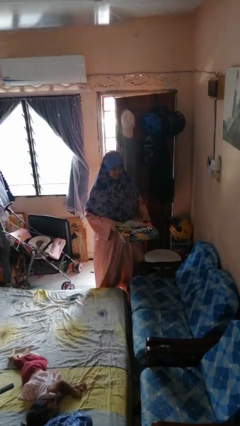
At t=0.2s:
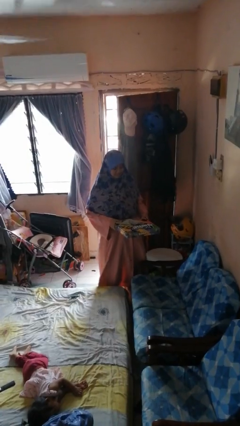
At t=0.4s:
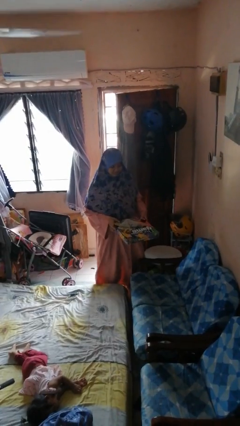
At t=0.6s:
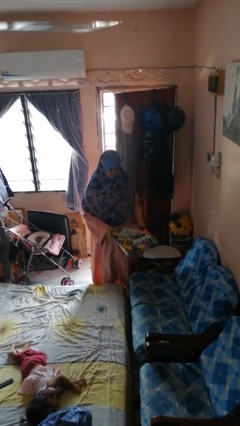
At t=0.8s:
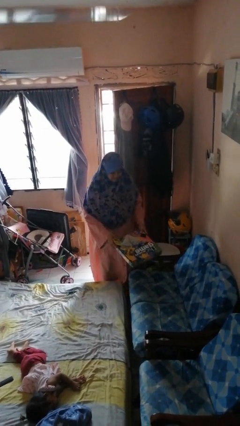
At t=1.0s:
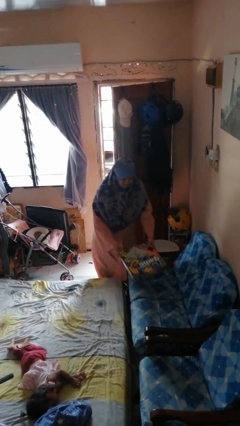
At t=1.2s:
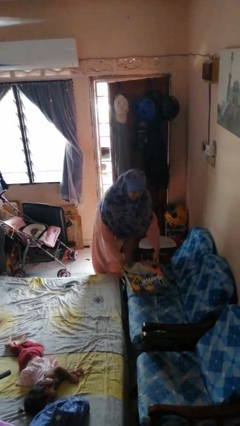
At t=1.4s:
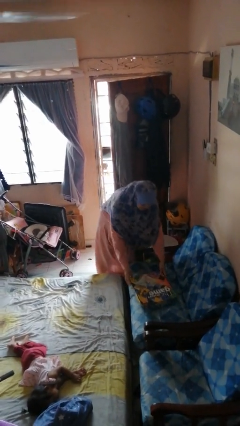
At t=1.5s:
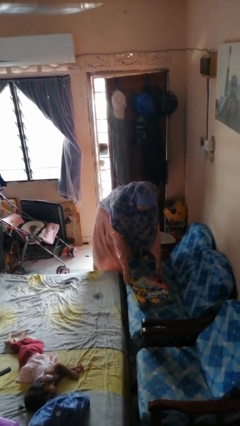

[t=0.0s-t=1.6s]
person puts down object on couch

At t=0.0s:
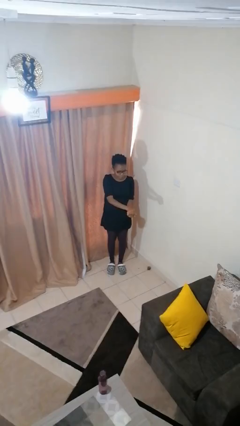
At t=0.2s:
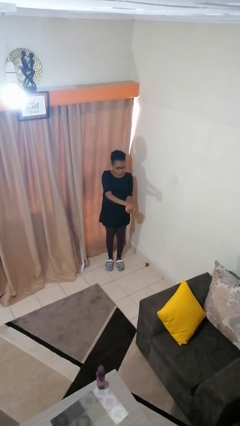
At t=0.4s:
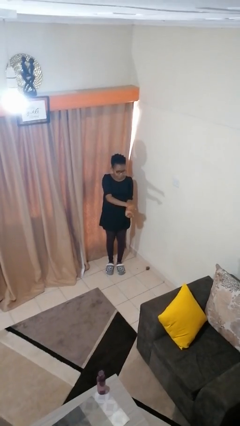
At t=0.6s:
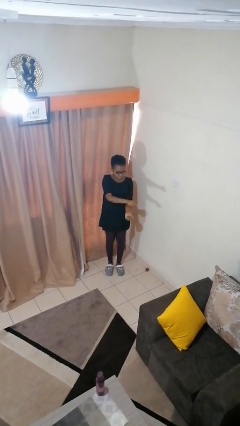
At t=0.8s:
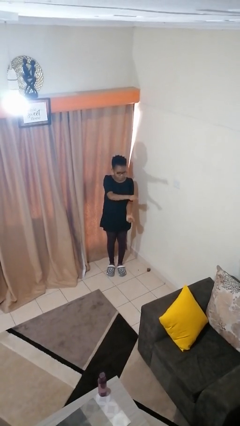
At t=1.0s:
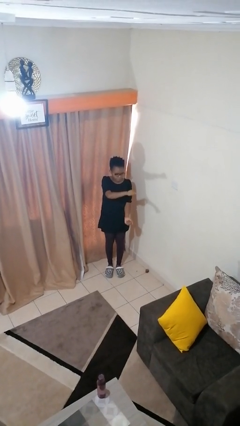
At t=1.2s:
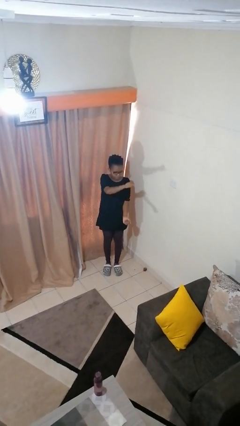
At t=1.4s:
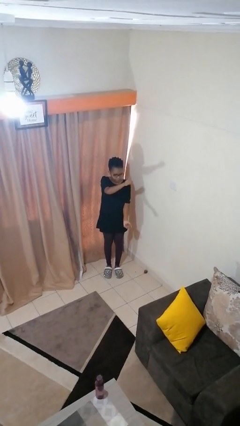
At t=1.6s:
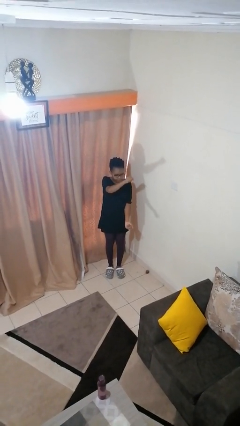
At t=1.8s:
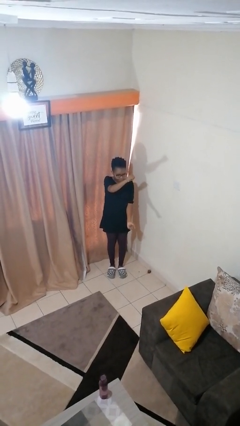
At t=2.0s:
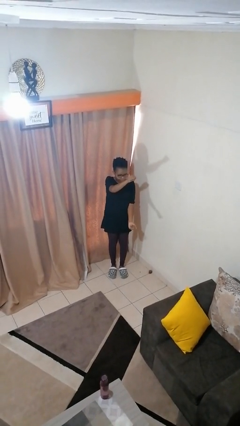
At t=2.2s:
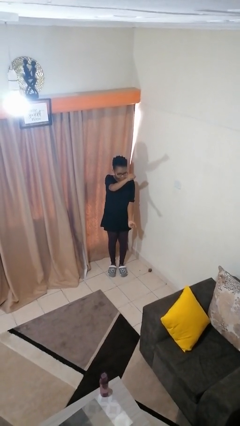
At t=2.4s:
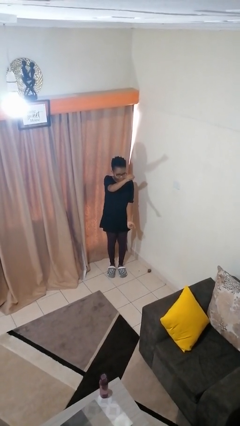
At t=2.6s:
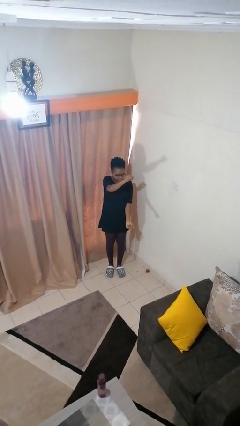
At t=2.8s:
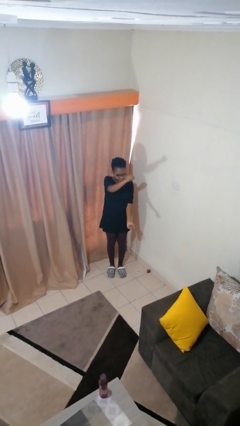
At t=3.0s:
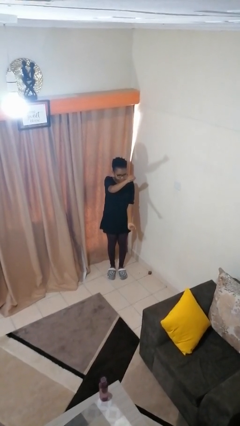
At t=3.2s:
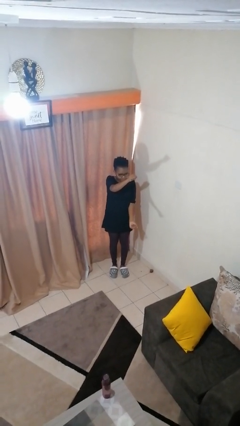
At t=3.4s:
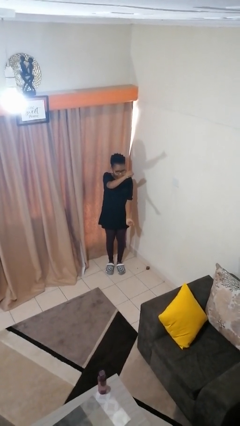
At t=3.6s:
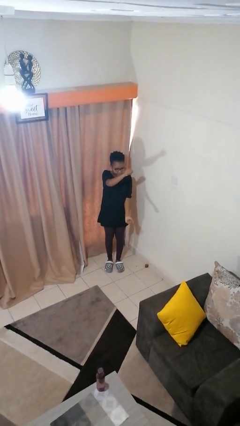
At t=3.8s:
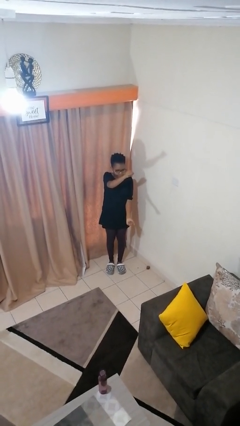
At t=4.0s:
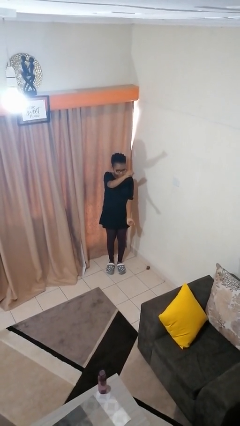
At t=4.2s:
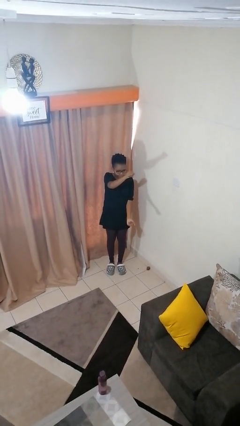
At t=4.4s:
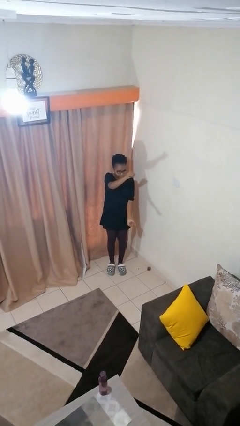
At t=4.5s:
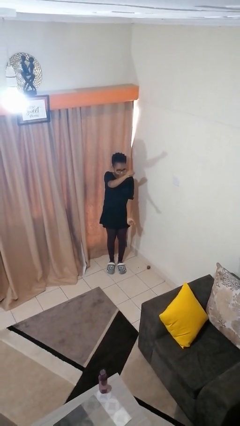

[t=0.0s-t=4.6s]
person gestures zoom in

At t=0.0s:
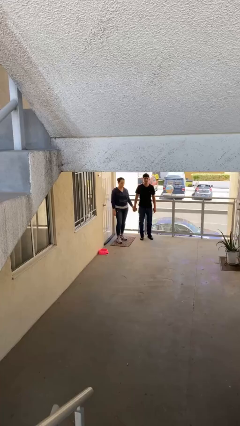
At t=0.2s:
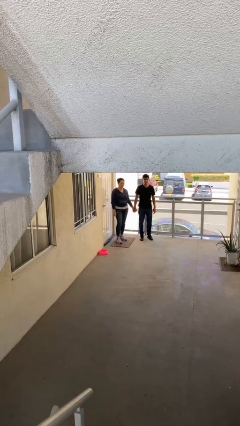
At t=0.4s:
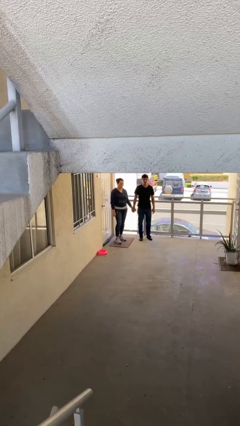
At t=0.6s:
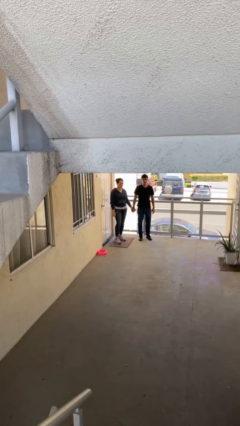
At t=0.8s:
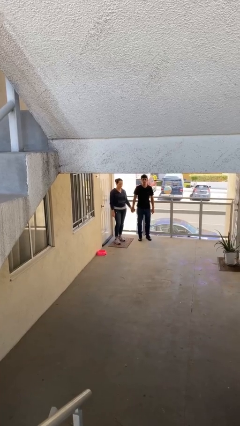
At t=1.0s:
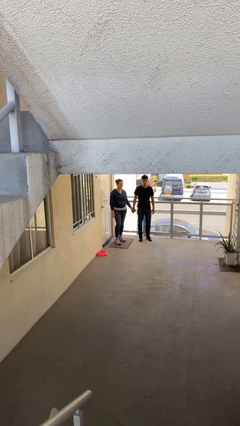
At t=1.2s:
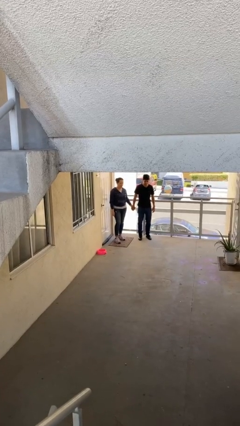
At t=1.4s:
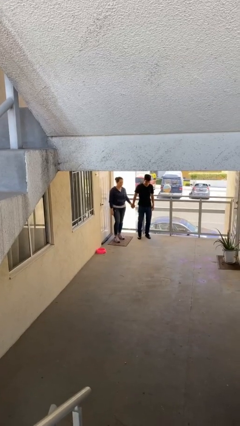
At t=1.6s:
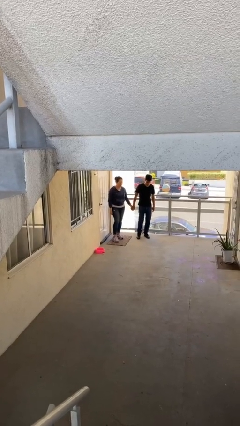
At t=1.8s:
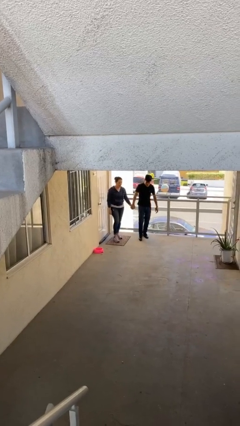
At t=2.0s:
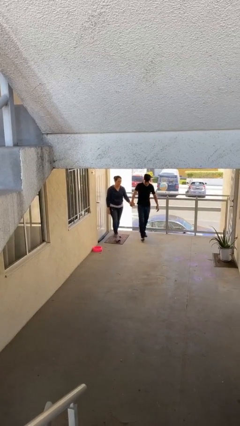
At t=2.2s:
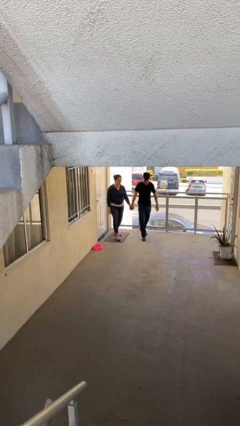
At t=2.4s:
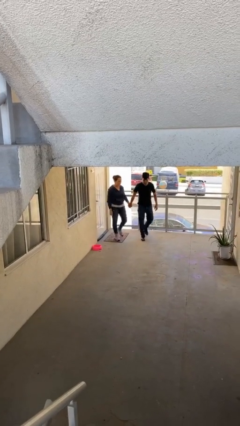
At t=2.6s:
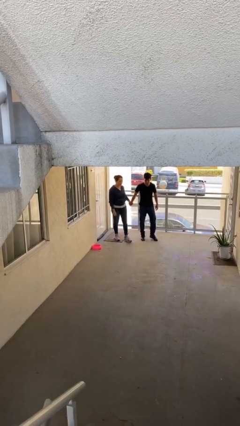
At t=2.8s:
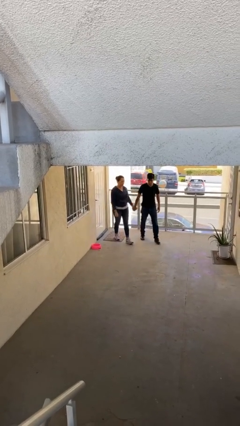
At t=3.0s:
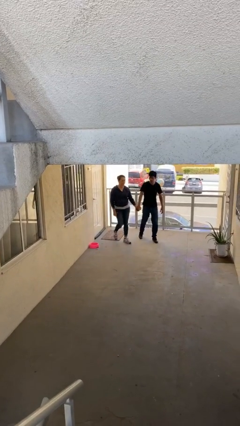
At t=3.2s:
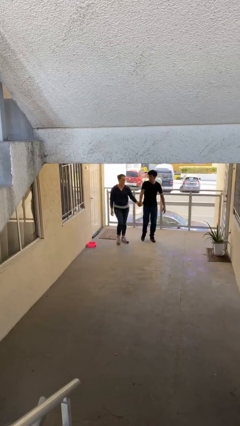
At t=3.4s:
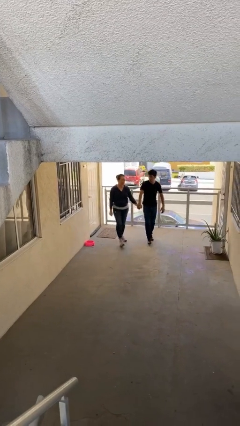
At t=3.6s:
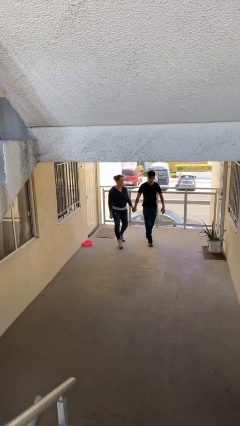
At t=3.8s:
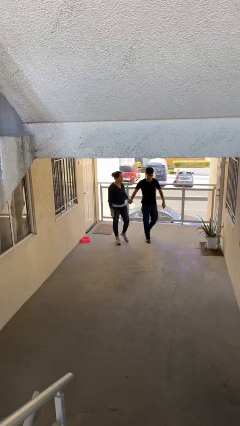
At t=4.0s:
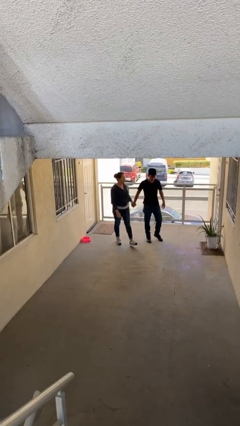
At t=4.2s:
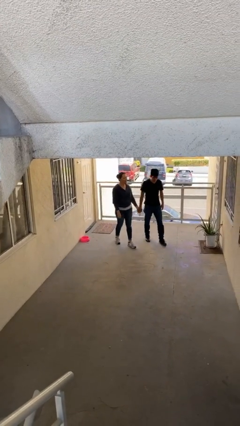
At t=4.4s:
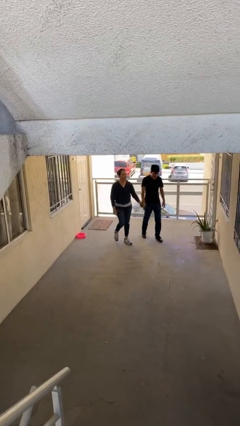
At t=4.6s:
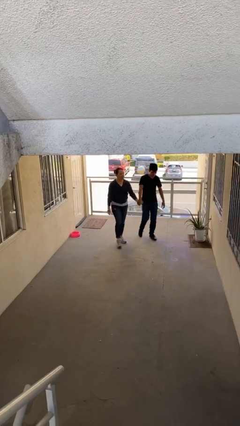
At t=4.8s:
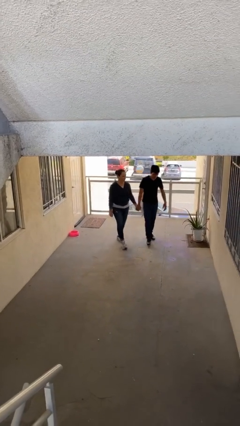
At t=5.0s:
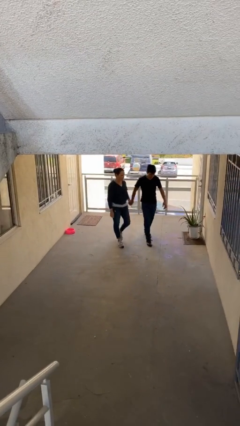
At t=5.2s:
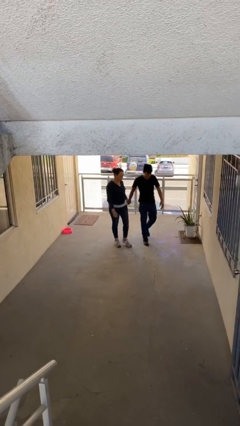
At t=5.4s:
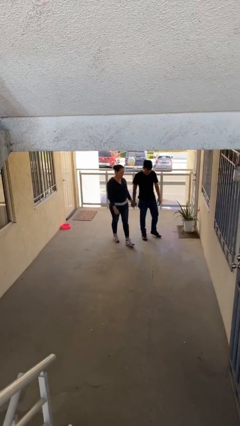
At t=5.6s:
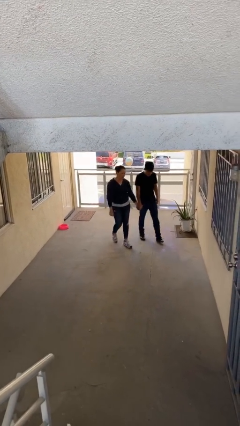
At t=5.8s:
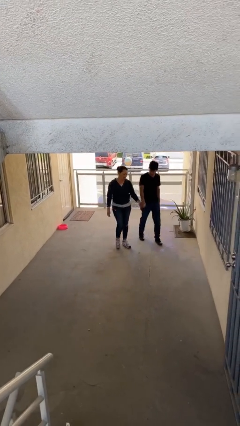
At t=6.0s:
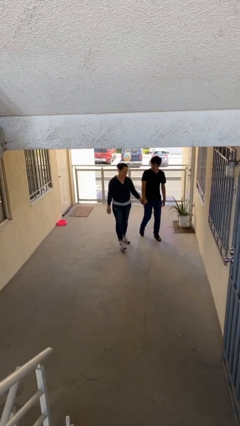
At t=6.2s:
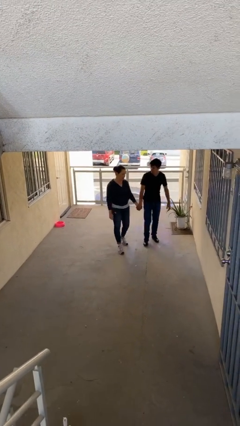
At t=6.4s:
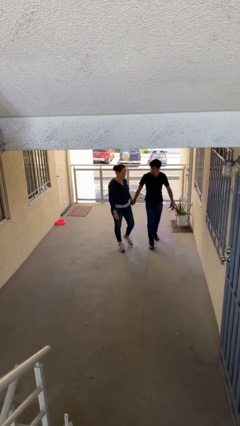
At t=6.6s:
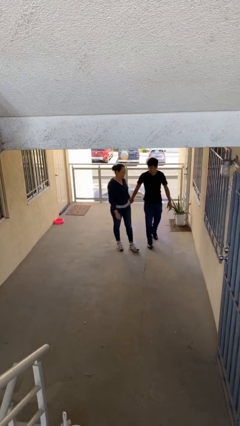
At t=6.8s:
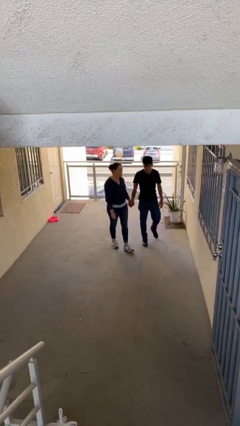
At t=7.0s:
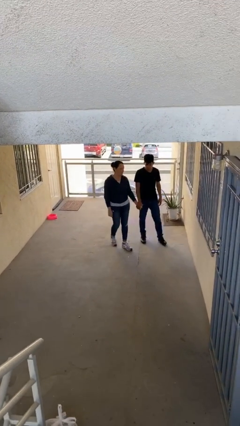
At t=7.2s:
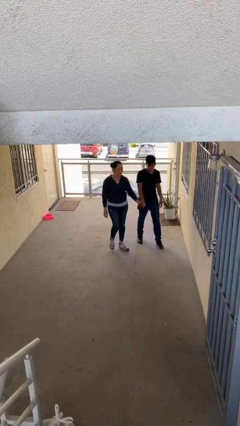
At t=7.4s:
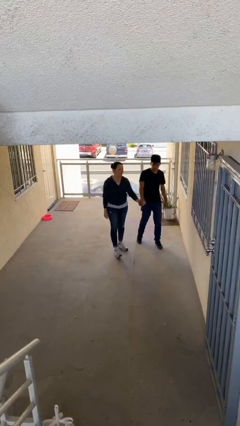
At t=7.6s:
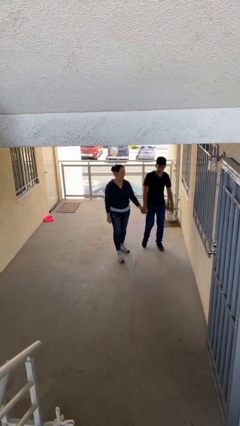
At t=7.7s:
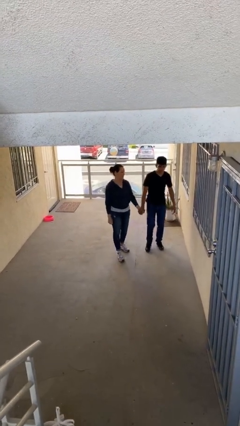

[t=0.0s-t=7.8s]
person holds hand

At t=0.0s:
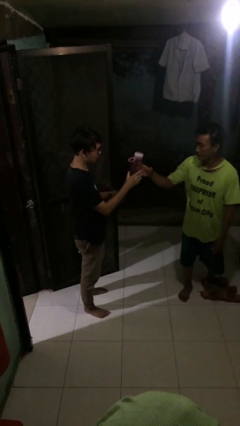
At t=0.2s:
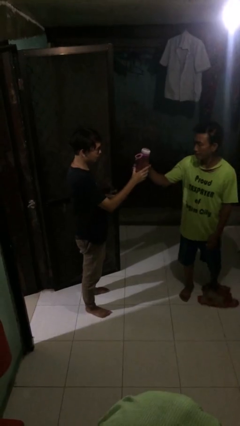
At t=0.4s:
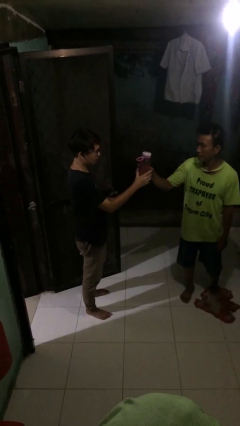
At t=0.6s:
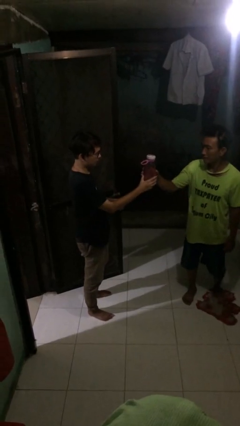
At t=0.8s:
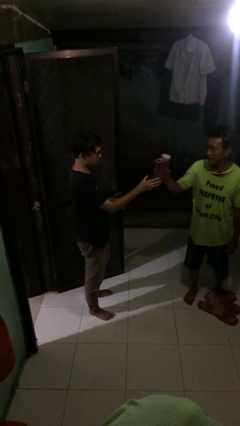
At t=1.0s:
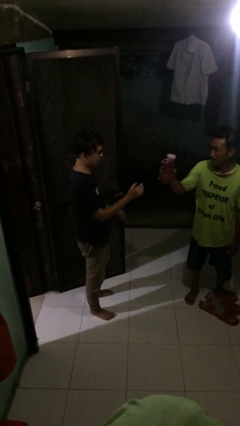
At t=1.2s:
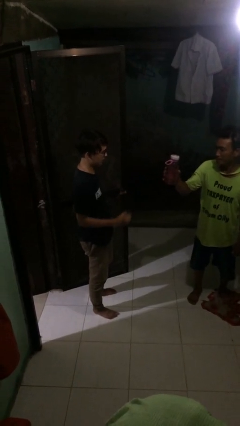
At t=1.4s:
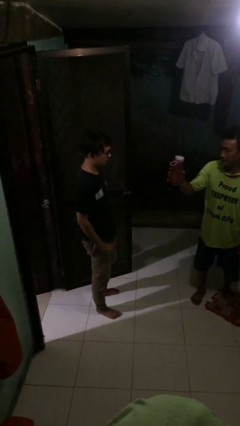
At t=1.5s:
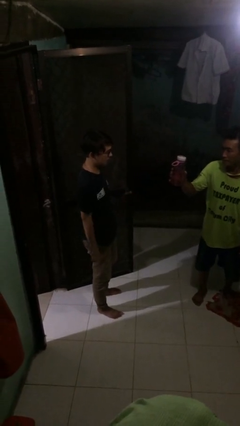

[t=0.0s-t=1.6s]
person transfers object to person

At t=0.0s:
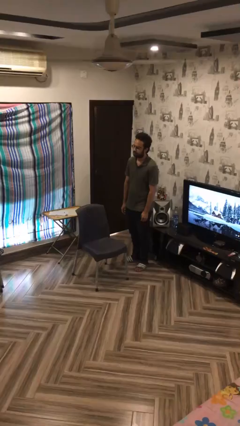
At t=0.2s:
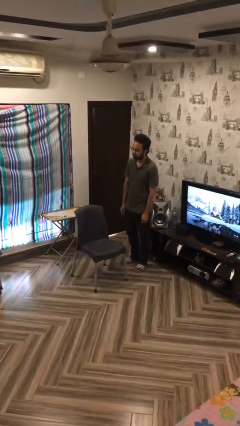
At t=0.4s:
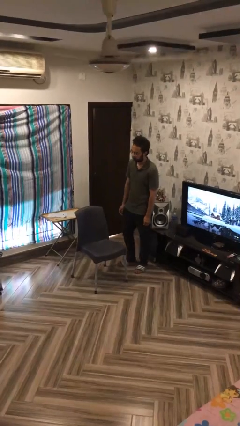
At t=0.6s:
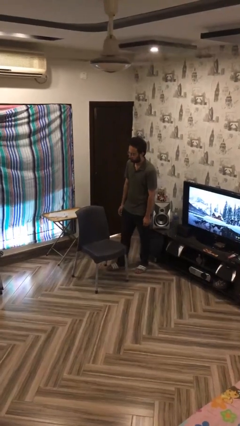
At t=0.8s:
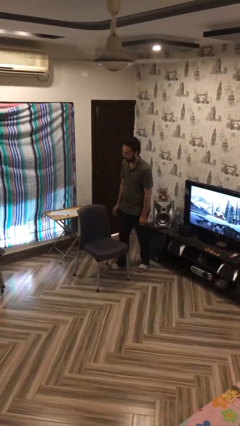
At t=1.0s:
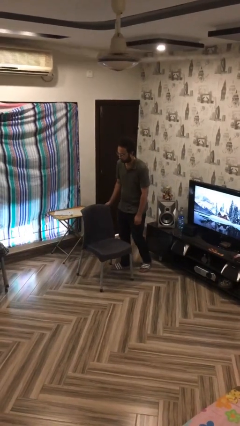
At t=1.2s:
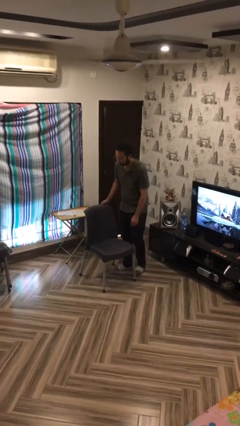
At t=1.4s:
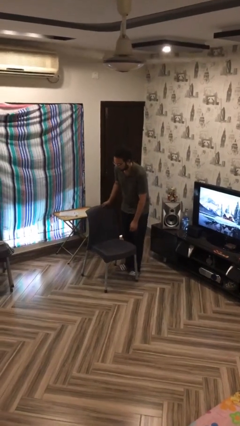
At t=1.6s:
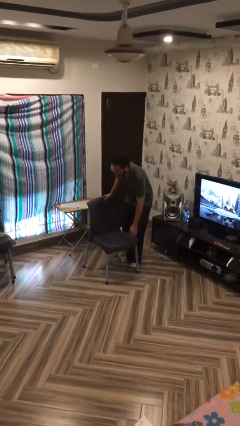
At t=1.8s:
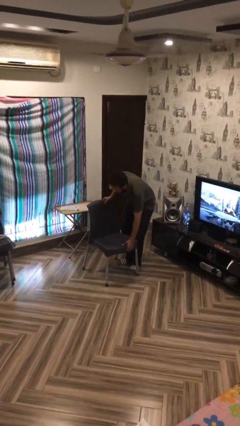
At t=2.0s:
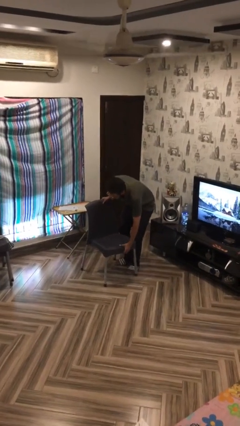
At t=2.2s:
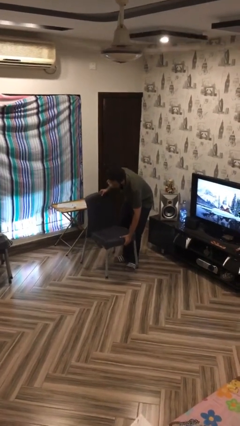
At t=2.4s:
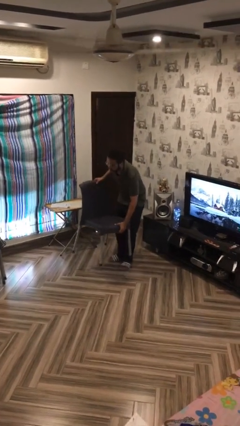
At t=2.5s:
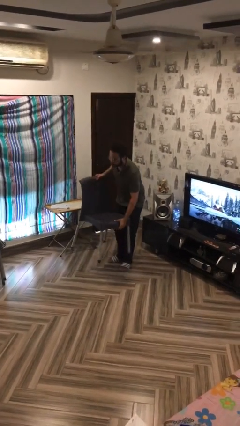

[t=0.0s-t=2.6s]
person picks up object from floor
